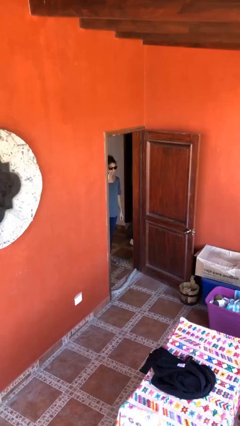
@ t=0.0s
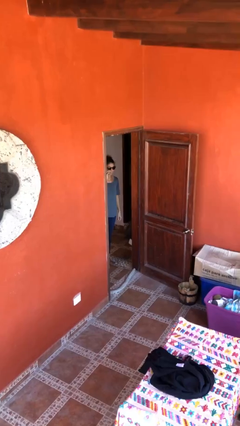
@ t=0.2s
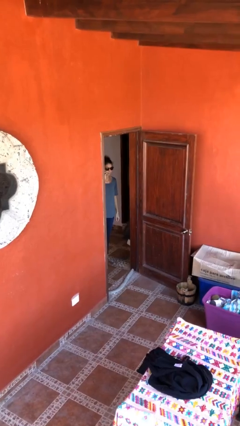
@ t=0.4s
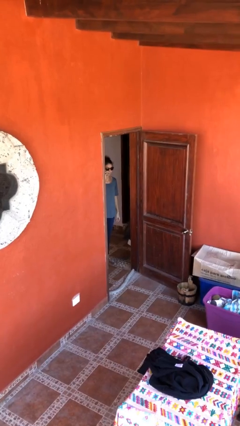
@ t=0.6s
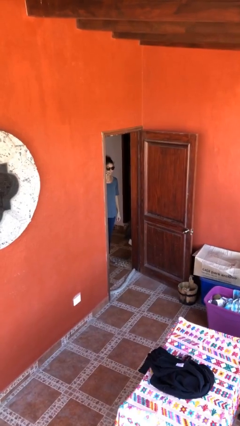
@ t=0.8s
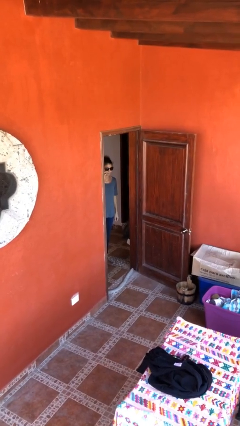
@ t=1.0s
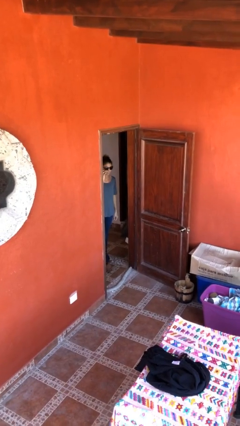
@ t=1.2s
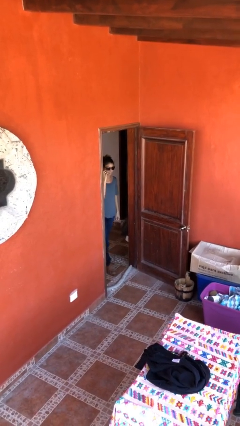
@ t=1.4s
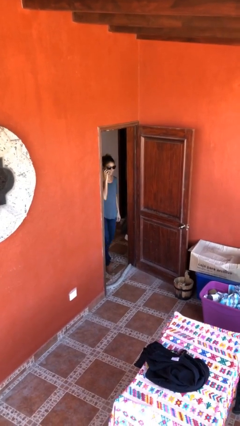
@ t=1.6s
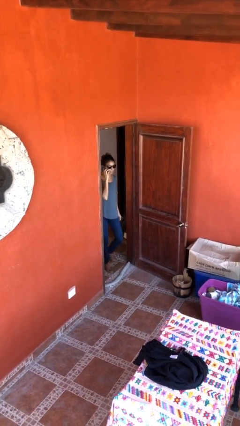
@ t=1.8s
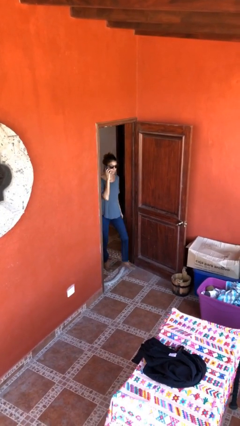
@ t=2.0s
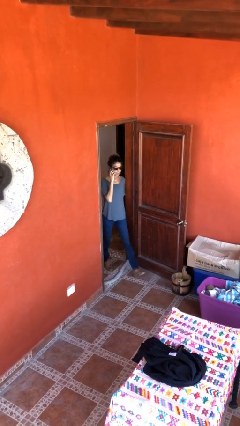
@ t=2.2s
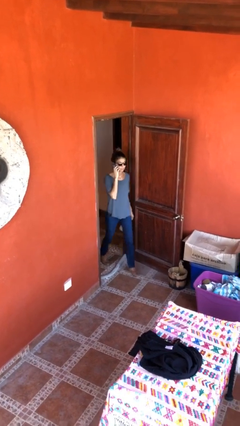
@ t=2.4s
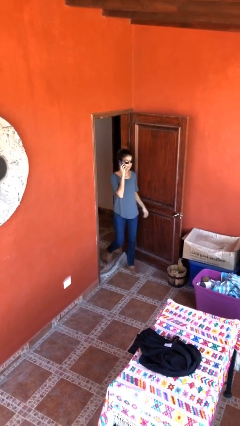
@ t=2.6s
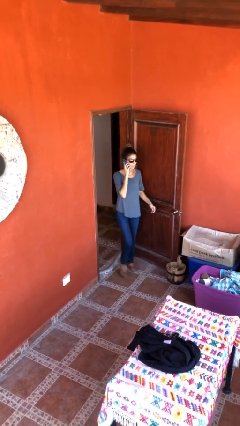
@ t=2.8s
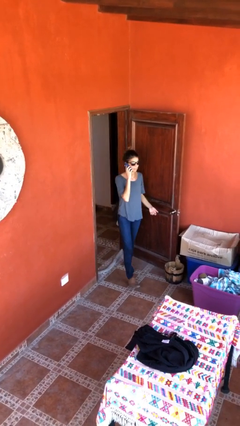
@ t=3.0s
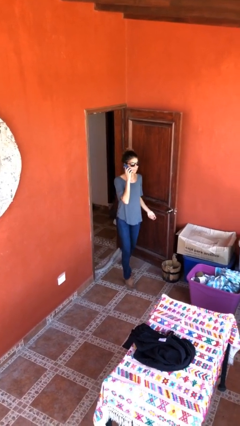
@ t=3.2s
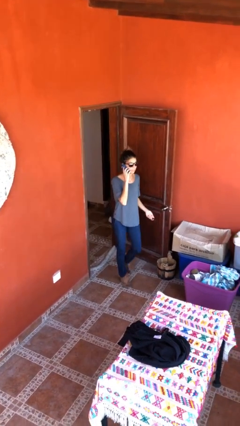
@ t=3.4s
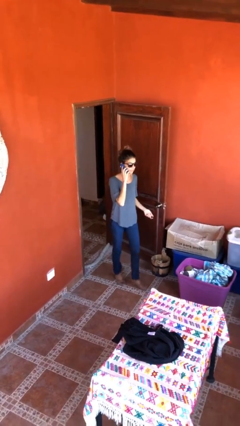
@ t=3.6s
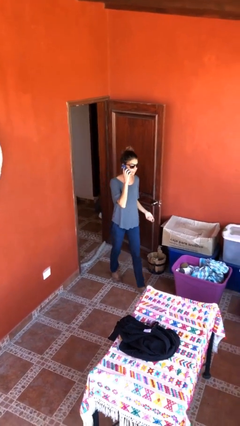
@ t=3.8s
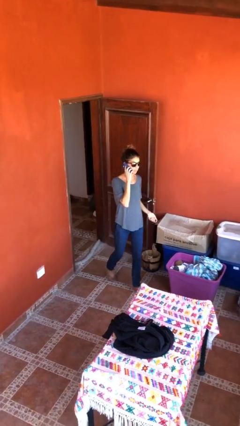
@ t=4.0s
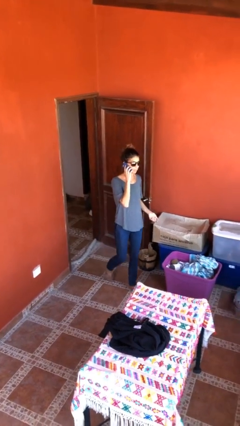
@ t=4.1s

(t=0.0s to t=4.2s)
person enters scene through structure

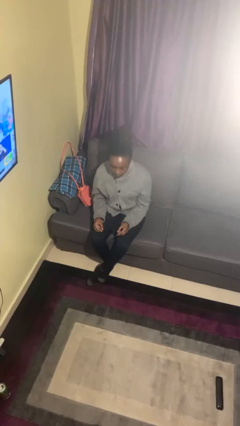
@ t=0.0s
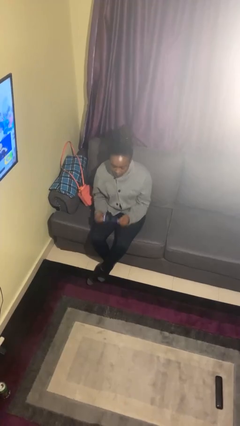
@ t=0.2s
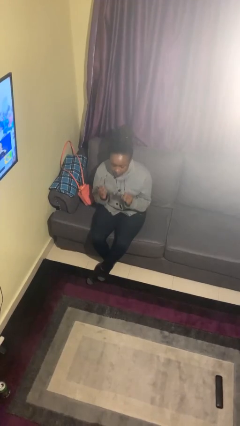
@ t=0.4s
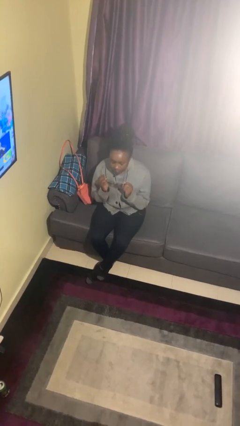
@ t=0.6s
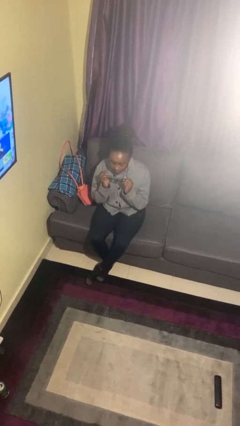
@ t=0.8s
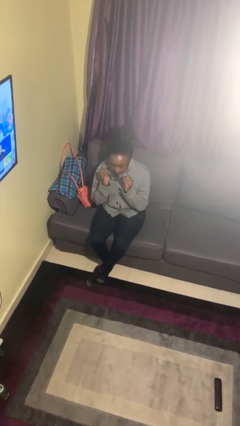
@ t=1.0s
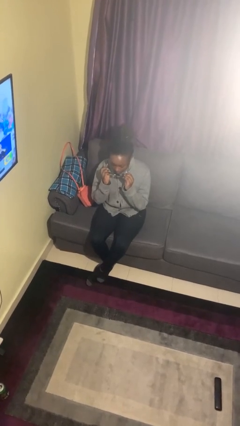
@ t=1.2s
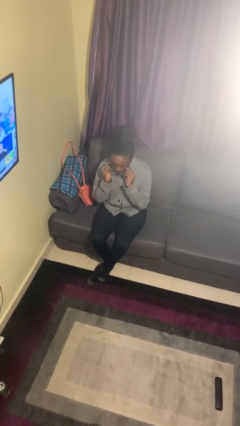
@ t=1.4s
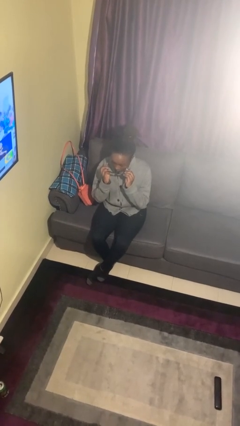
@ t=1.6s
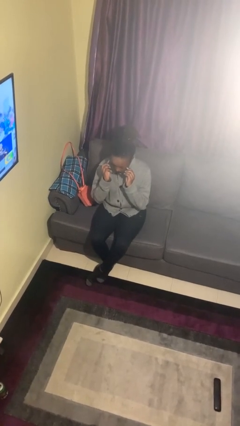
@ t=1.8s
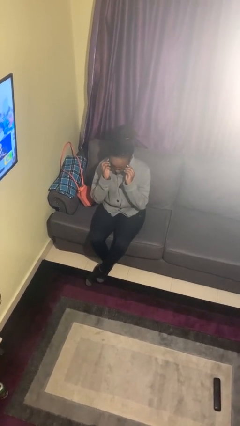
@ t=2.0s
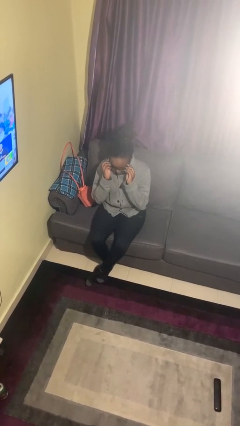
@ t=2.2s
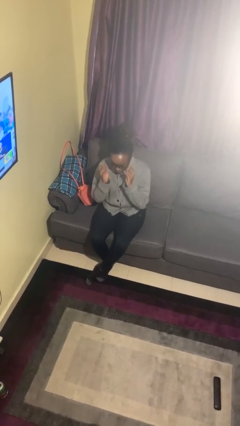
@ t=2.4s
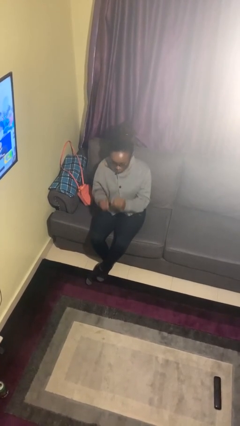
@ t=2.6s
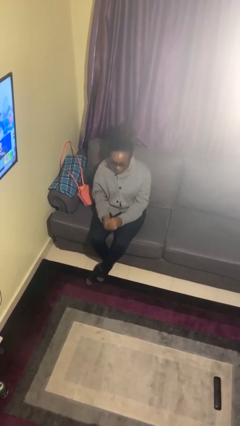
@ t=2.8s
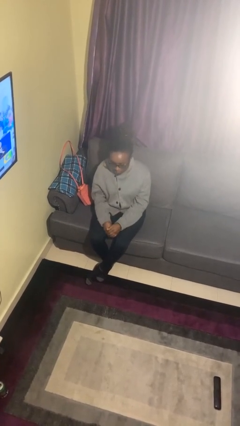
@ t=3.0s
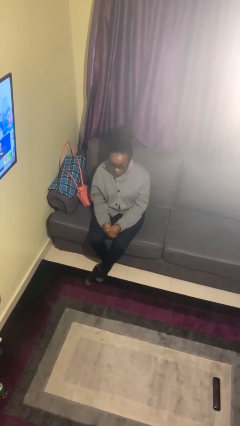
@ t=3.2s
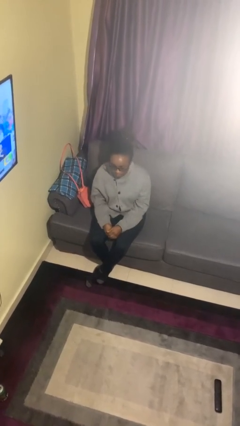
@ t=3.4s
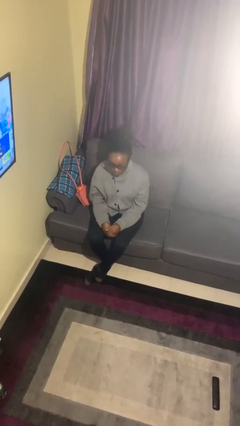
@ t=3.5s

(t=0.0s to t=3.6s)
person puts on glasses

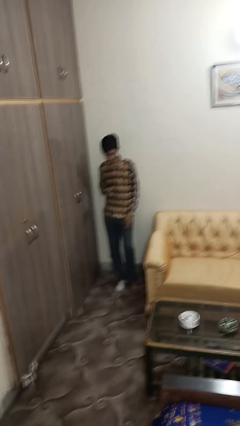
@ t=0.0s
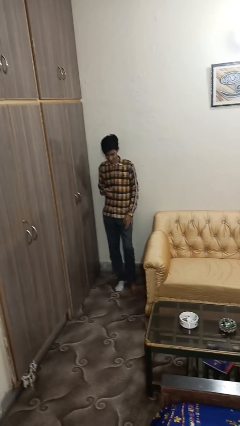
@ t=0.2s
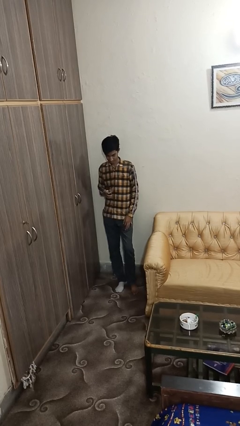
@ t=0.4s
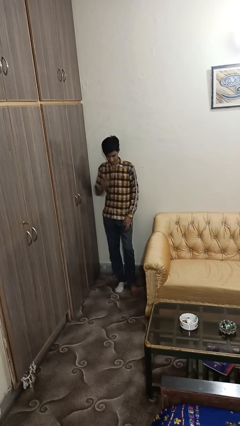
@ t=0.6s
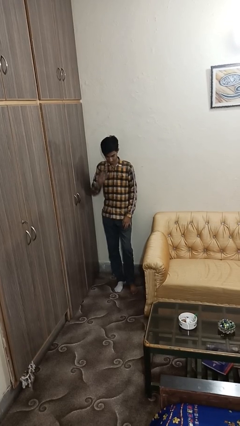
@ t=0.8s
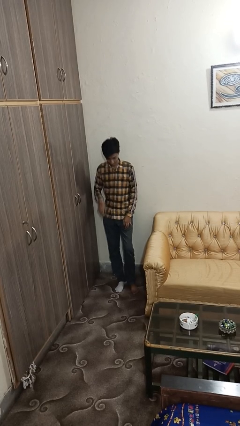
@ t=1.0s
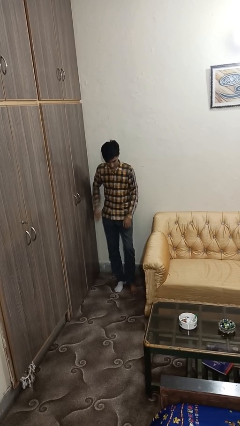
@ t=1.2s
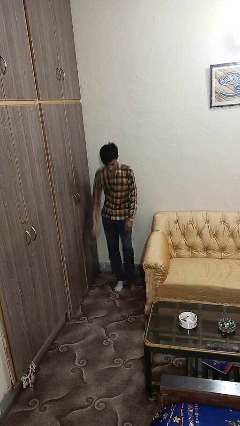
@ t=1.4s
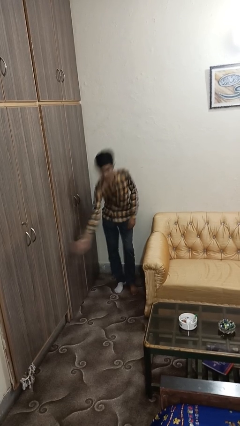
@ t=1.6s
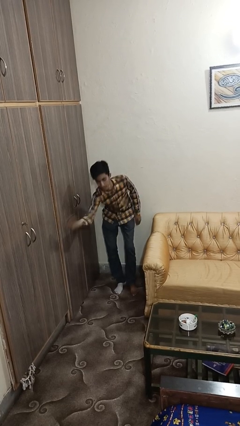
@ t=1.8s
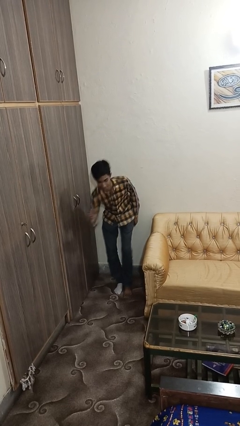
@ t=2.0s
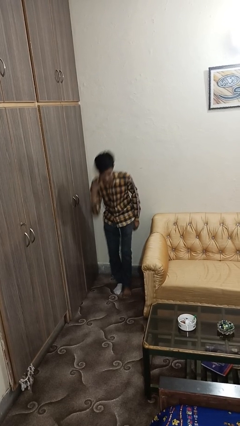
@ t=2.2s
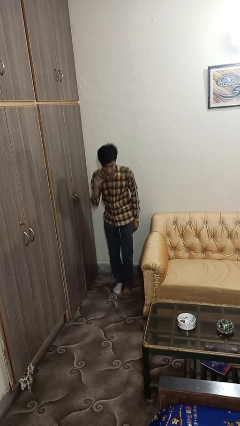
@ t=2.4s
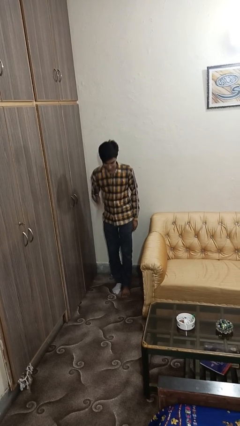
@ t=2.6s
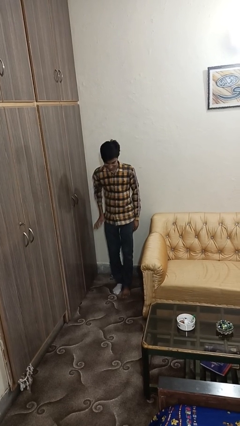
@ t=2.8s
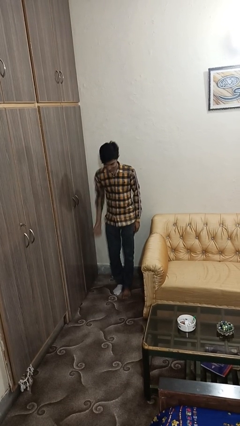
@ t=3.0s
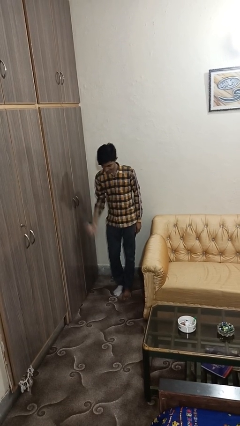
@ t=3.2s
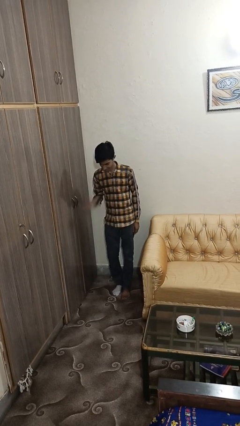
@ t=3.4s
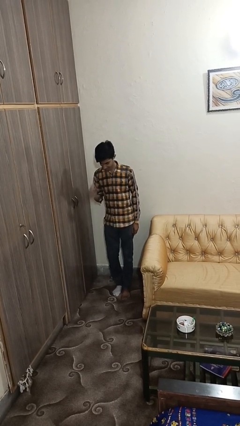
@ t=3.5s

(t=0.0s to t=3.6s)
person bounces ball on floor

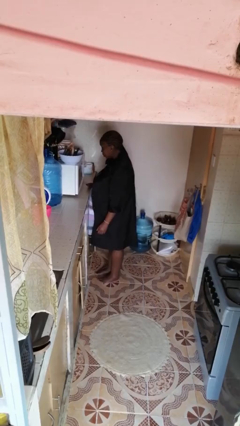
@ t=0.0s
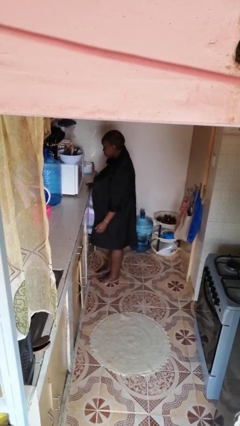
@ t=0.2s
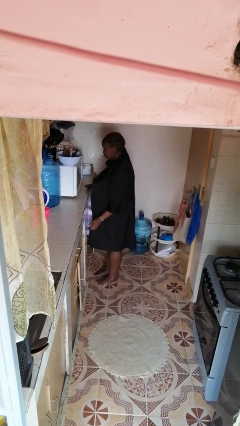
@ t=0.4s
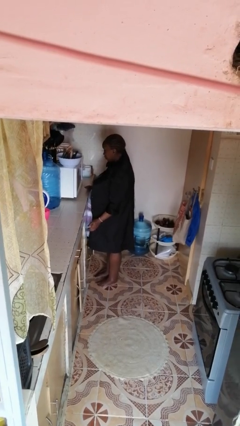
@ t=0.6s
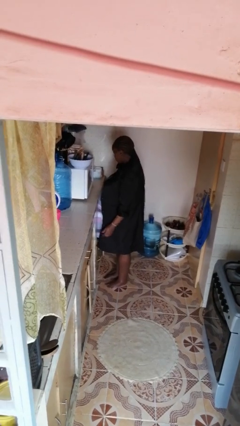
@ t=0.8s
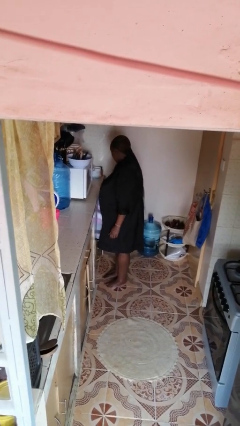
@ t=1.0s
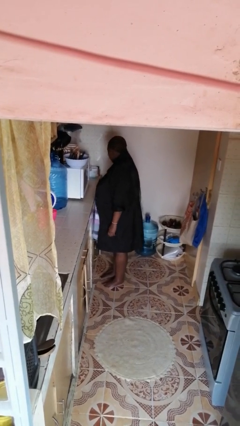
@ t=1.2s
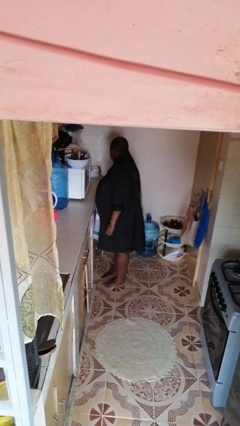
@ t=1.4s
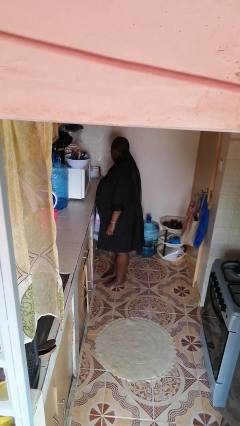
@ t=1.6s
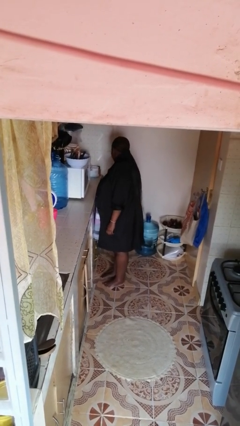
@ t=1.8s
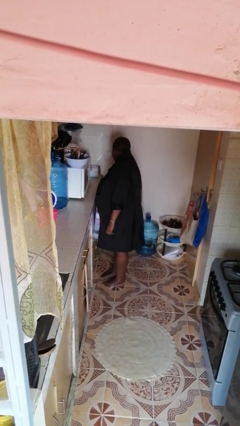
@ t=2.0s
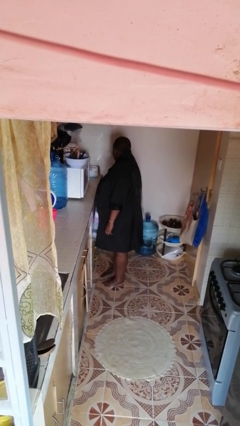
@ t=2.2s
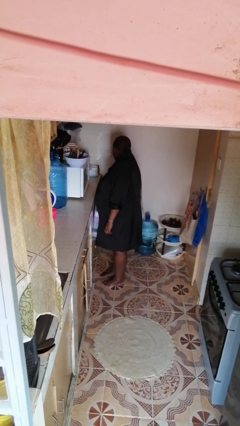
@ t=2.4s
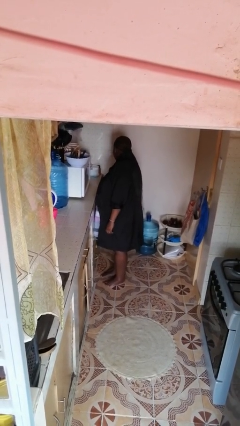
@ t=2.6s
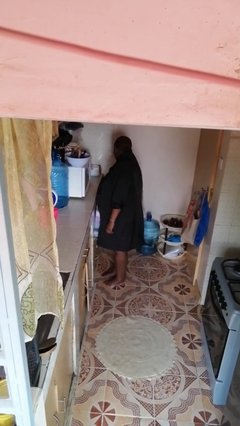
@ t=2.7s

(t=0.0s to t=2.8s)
person opens cabinet

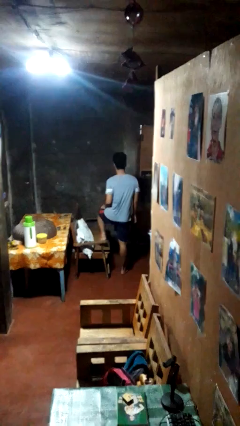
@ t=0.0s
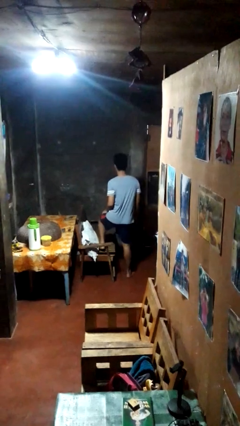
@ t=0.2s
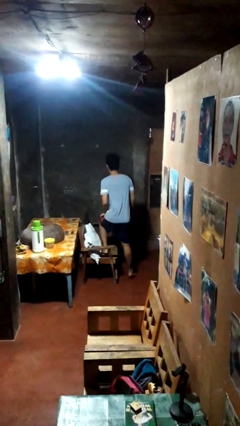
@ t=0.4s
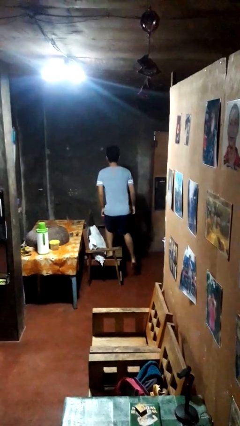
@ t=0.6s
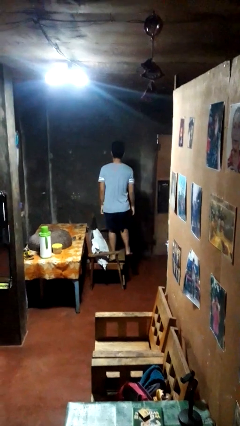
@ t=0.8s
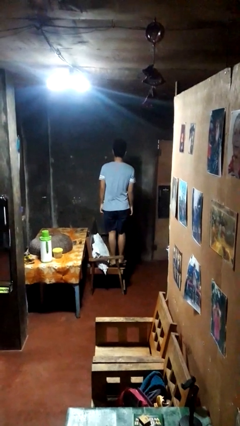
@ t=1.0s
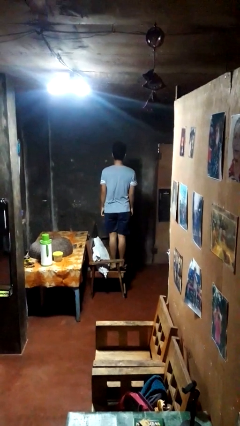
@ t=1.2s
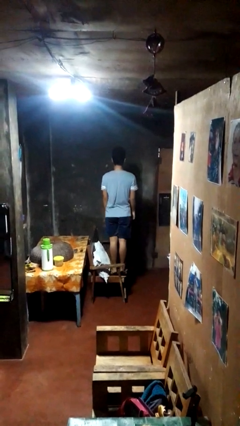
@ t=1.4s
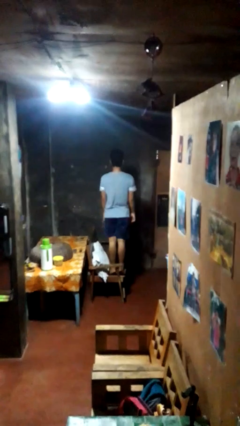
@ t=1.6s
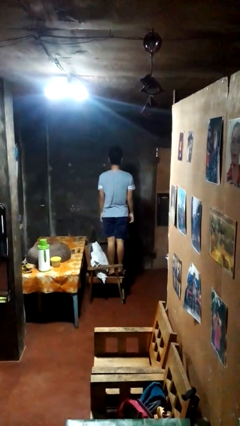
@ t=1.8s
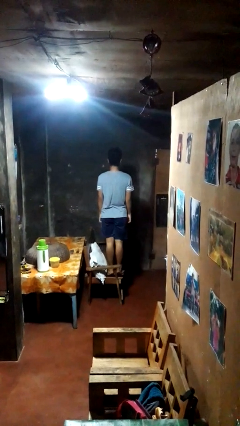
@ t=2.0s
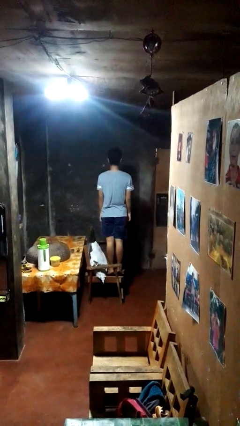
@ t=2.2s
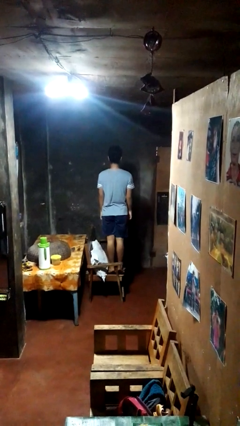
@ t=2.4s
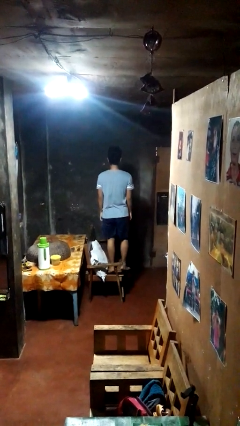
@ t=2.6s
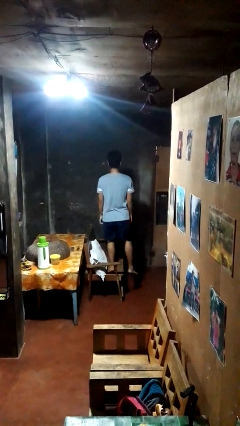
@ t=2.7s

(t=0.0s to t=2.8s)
person climbs on couch

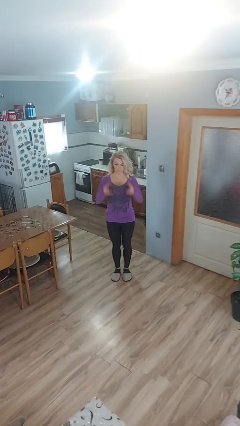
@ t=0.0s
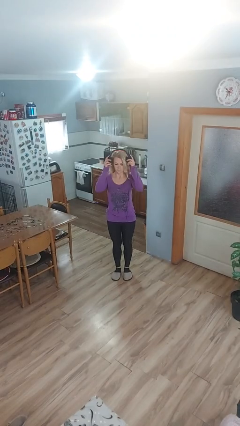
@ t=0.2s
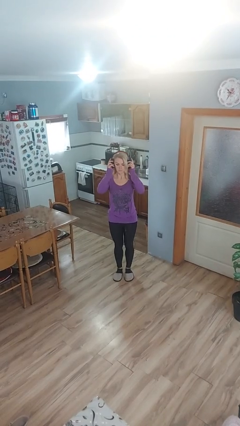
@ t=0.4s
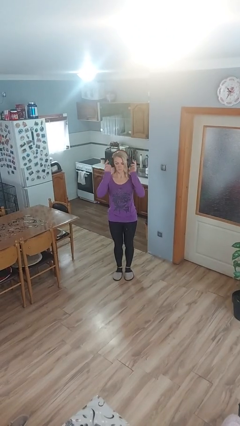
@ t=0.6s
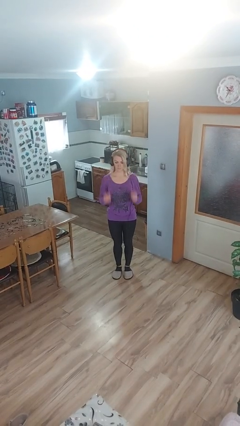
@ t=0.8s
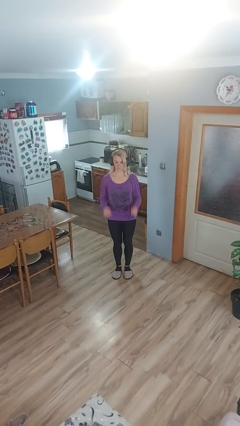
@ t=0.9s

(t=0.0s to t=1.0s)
person puts on headphones
